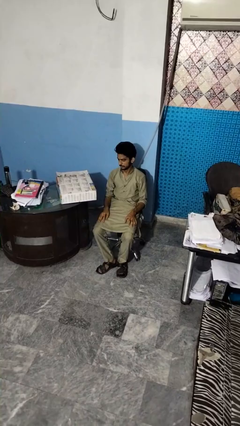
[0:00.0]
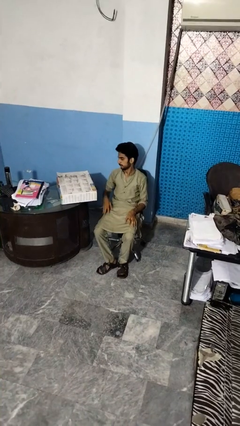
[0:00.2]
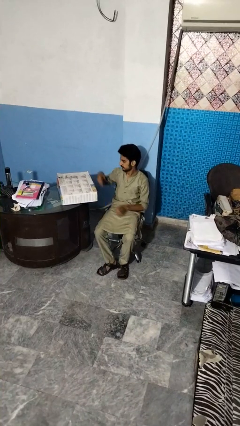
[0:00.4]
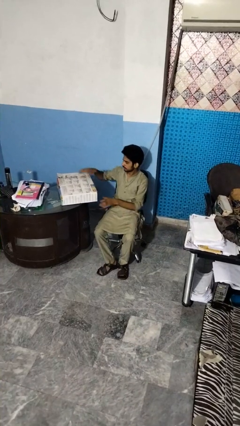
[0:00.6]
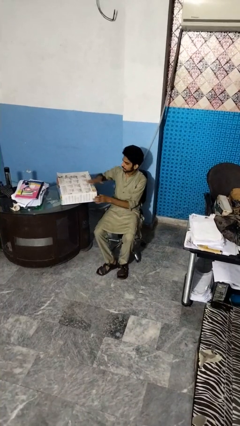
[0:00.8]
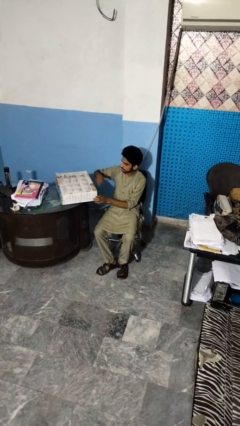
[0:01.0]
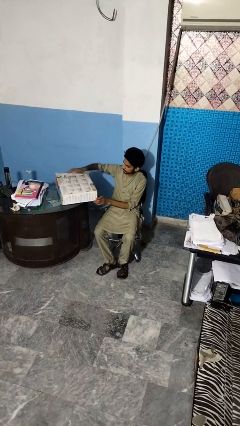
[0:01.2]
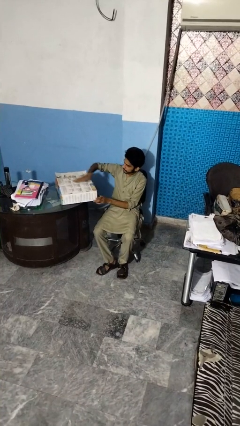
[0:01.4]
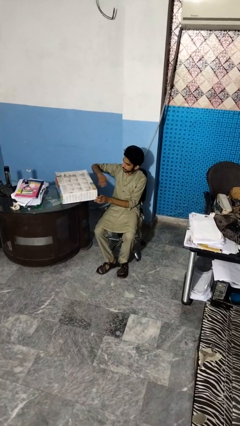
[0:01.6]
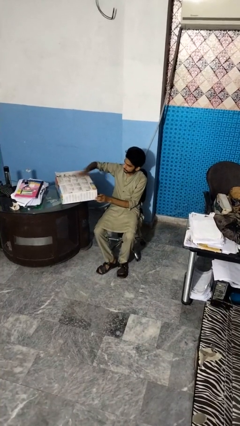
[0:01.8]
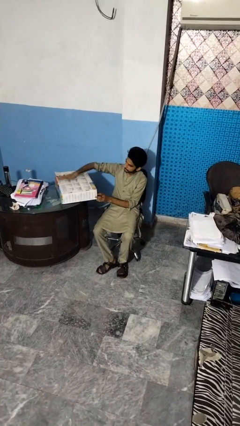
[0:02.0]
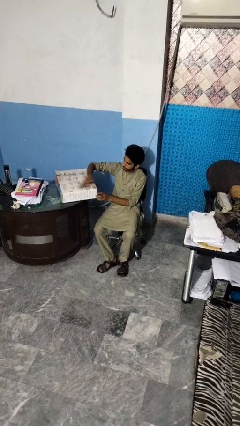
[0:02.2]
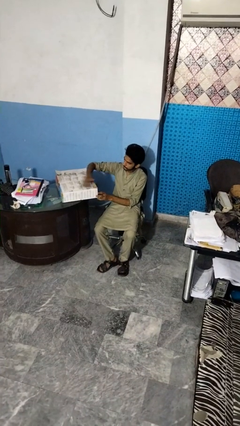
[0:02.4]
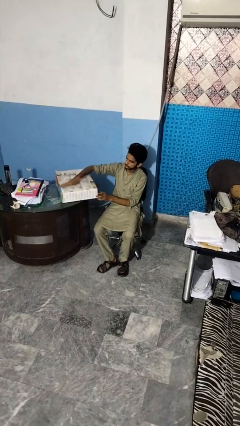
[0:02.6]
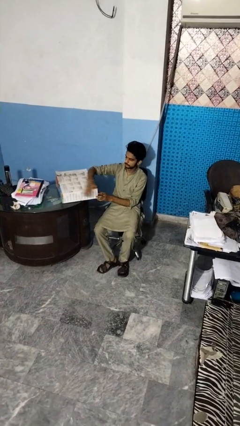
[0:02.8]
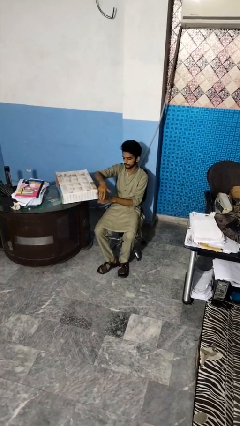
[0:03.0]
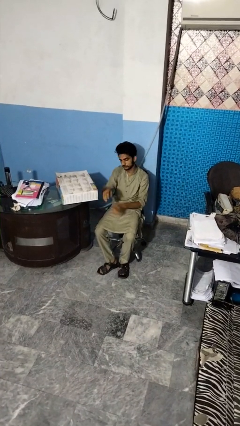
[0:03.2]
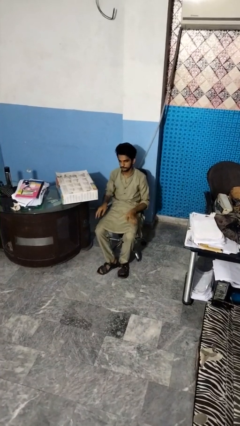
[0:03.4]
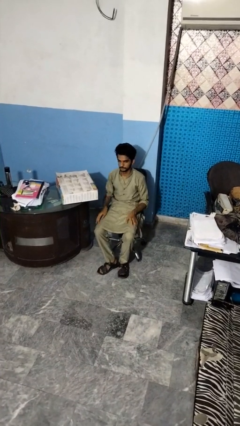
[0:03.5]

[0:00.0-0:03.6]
person waves hand over object

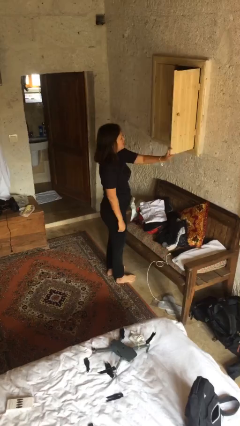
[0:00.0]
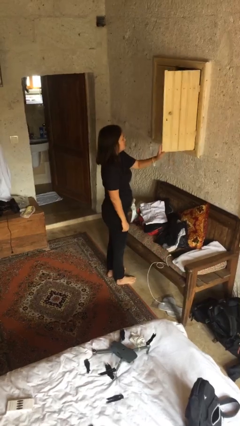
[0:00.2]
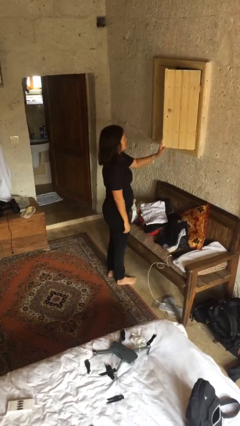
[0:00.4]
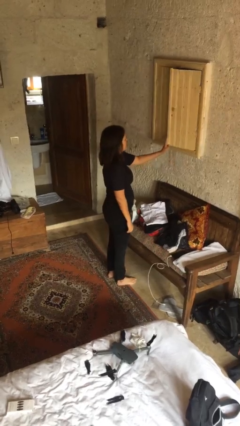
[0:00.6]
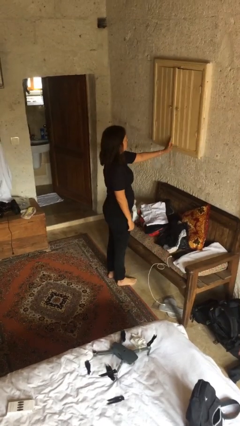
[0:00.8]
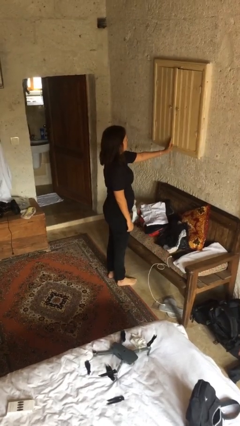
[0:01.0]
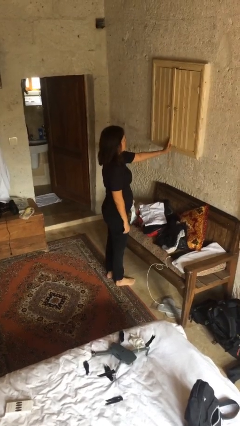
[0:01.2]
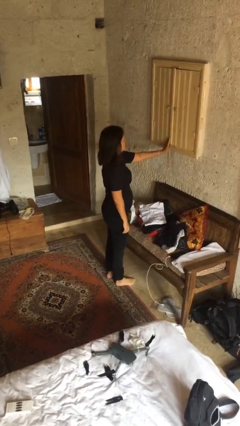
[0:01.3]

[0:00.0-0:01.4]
person closes dresser drawer

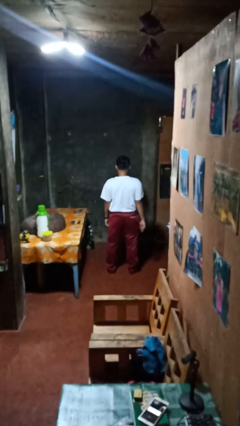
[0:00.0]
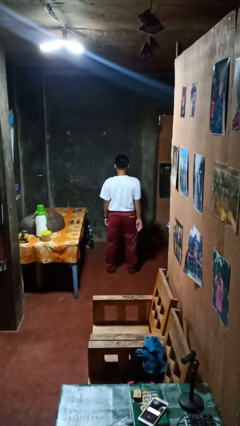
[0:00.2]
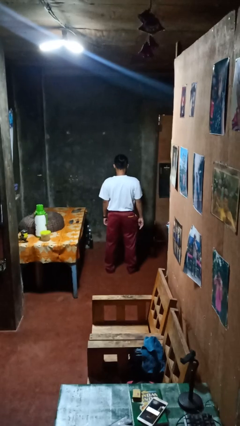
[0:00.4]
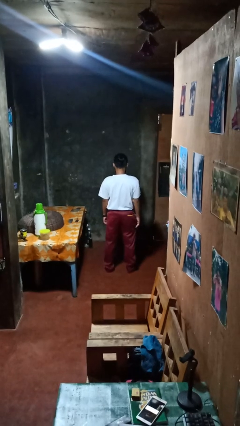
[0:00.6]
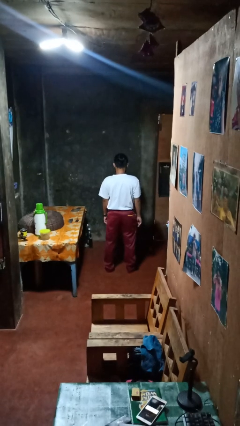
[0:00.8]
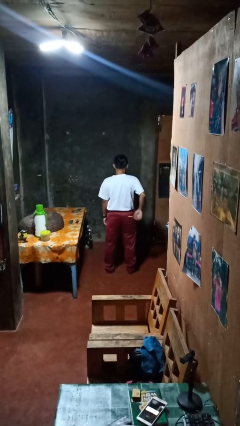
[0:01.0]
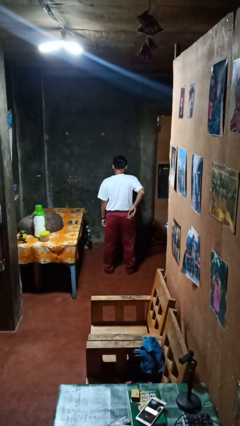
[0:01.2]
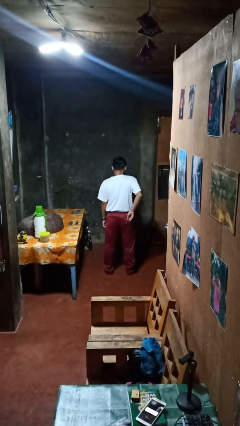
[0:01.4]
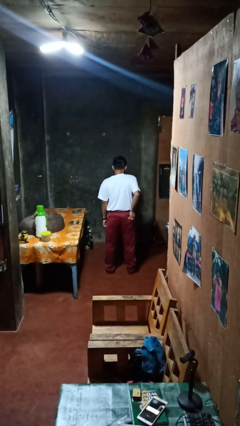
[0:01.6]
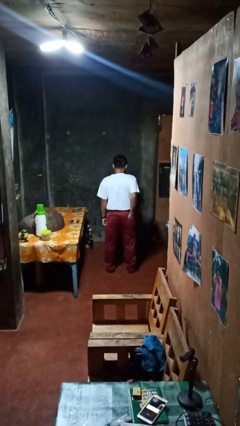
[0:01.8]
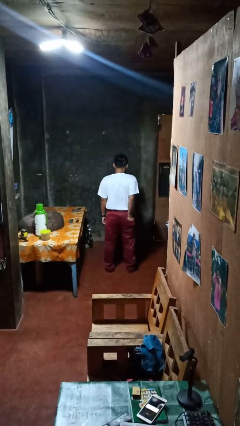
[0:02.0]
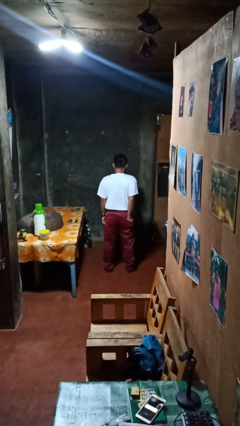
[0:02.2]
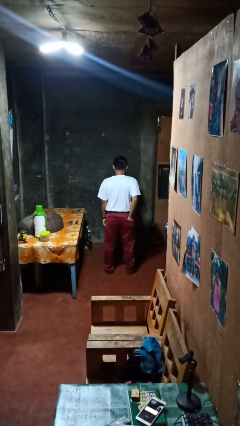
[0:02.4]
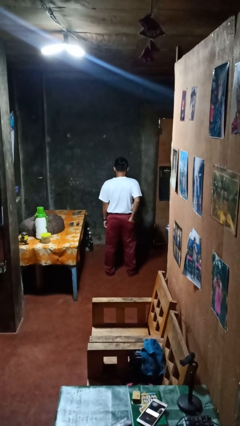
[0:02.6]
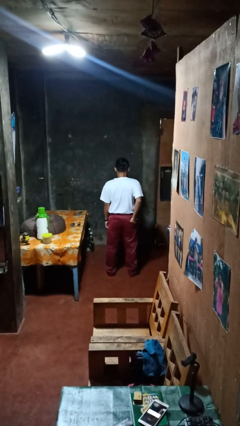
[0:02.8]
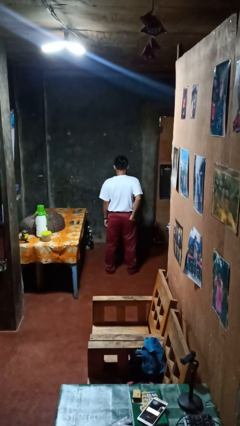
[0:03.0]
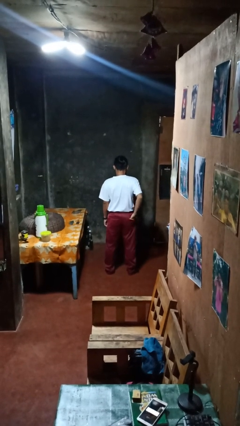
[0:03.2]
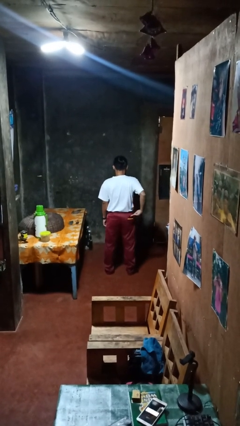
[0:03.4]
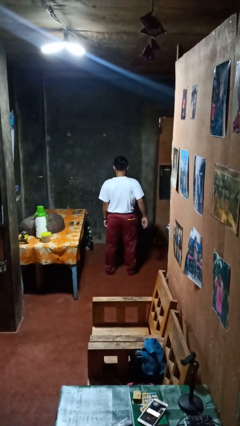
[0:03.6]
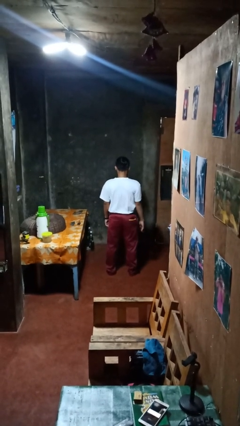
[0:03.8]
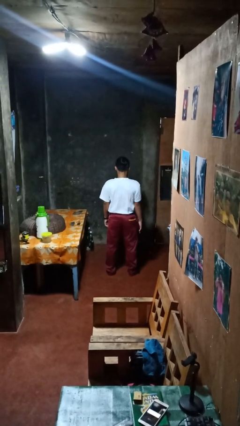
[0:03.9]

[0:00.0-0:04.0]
person puts hands in back pockets

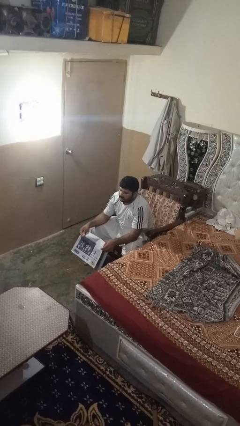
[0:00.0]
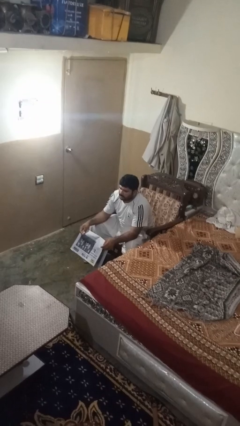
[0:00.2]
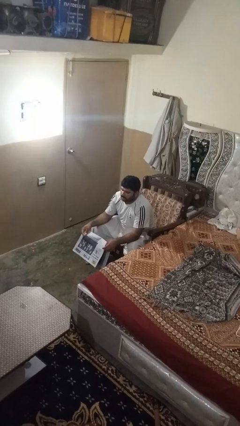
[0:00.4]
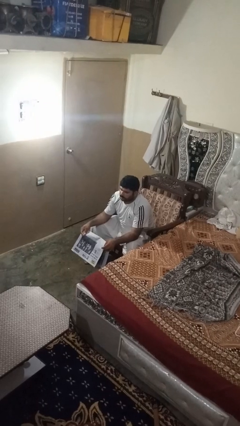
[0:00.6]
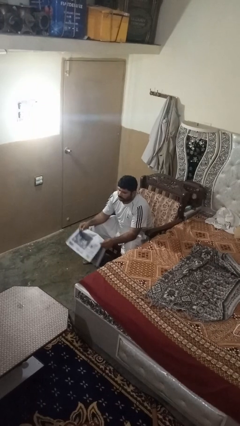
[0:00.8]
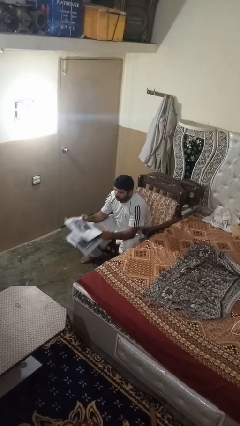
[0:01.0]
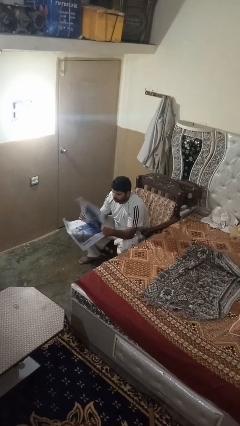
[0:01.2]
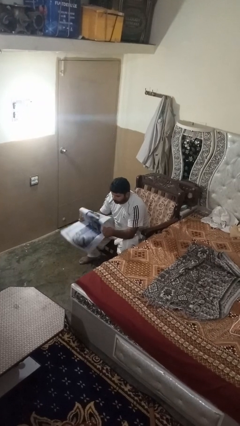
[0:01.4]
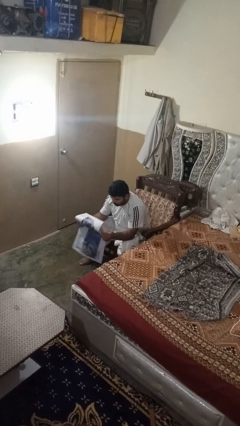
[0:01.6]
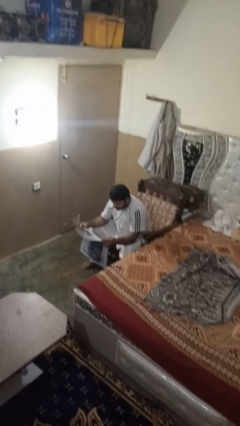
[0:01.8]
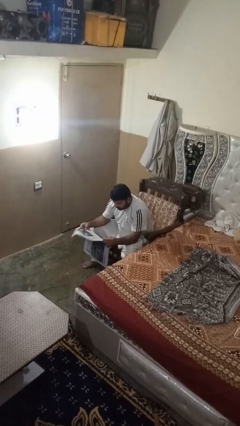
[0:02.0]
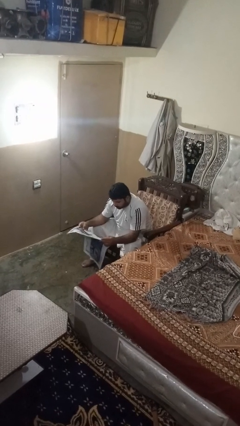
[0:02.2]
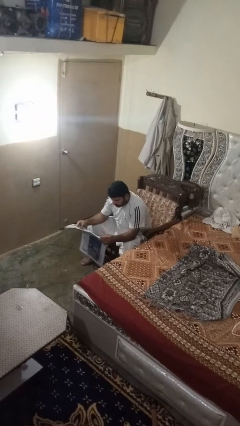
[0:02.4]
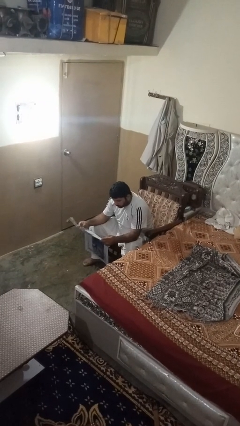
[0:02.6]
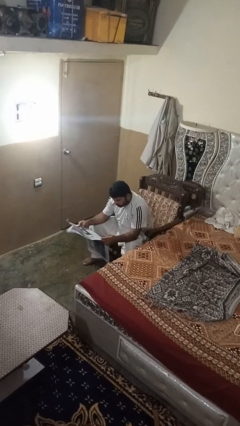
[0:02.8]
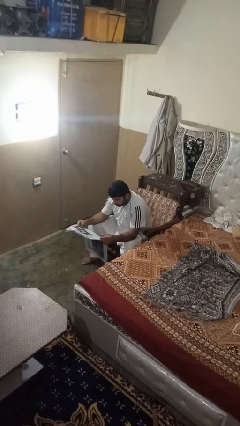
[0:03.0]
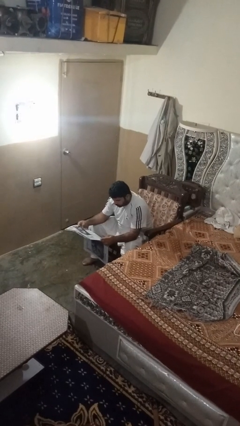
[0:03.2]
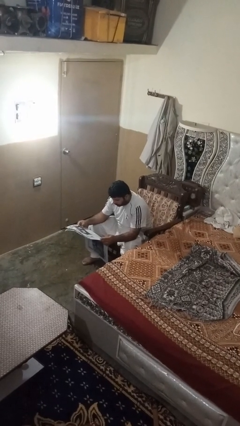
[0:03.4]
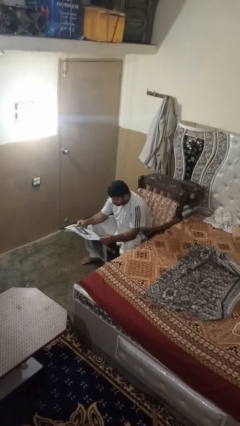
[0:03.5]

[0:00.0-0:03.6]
person reads newspaper

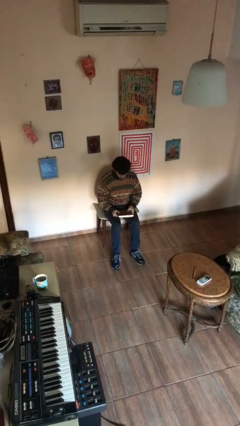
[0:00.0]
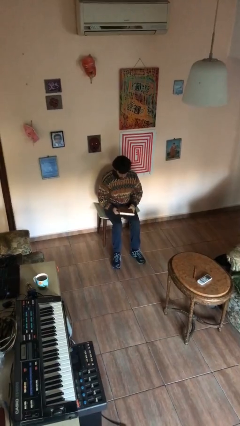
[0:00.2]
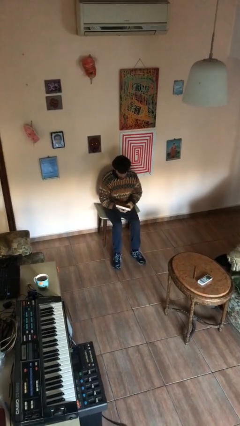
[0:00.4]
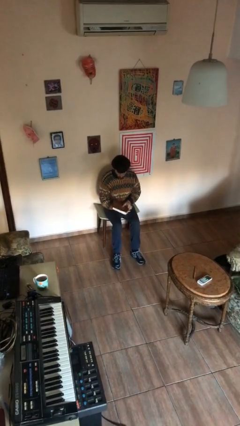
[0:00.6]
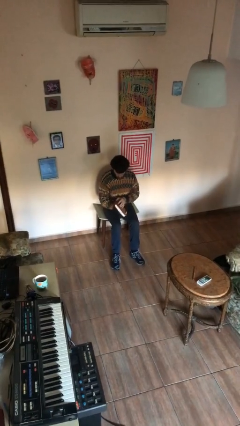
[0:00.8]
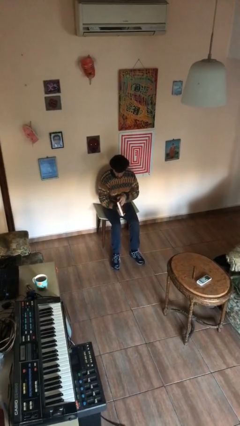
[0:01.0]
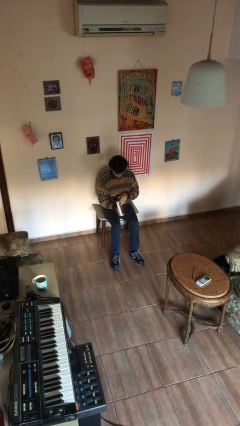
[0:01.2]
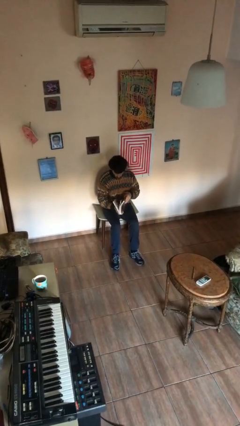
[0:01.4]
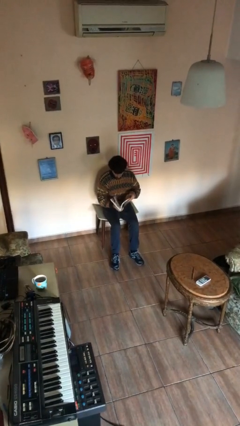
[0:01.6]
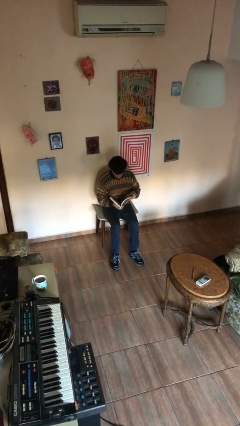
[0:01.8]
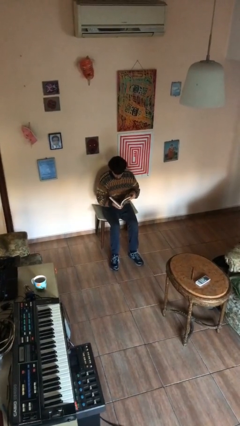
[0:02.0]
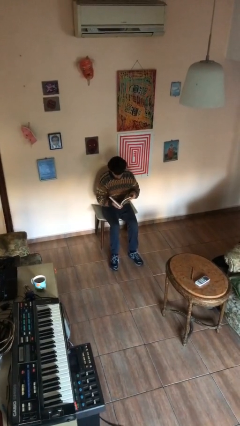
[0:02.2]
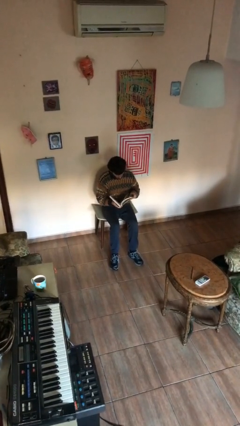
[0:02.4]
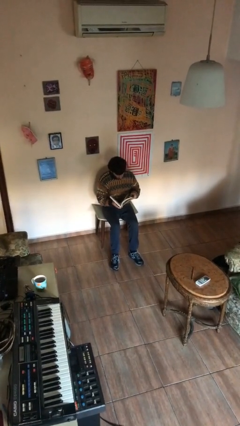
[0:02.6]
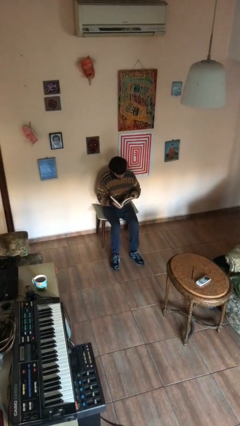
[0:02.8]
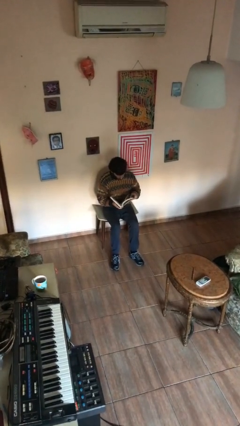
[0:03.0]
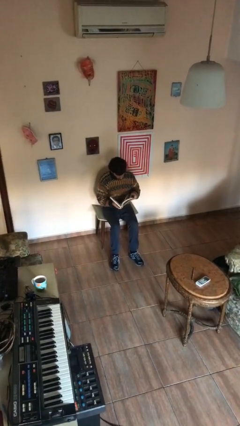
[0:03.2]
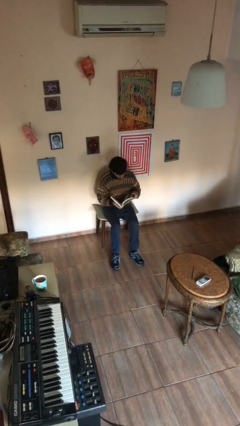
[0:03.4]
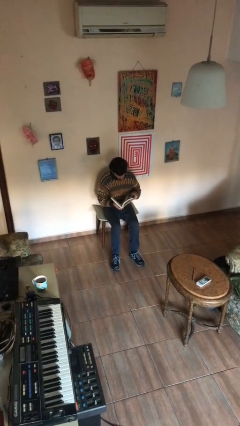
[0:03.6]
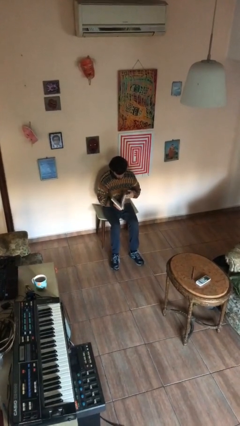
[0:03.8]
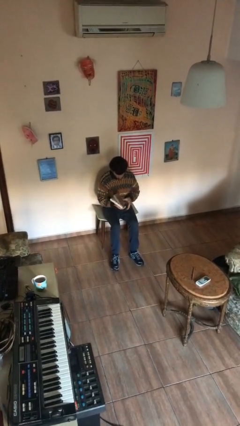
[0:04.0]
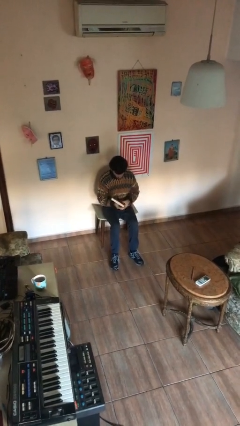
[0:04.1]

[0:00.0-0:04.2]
person reads book

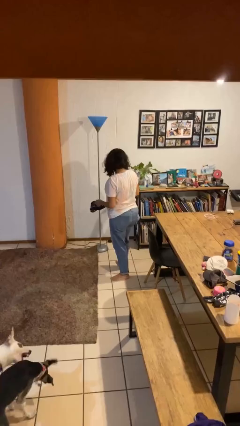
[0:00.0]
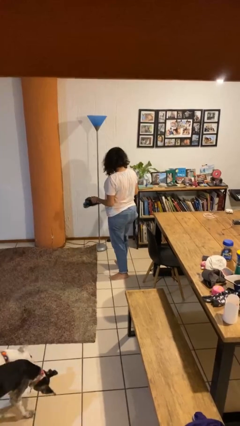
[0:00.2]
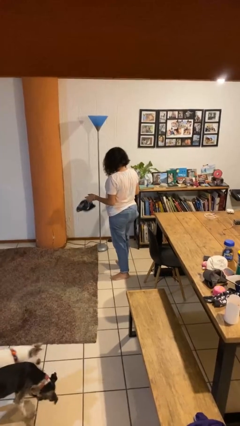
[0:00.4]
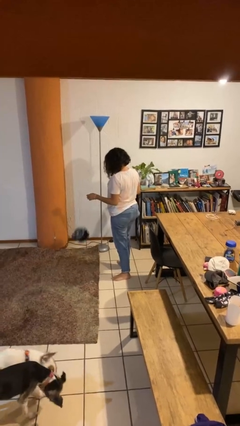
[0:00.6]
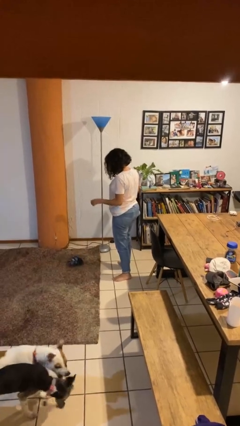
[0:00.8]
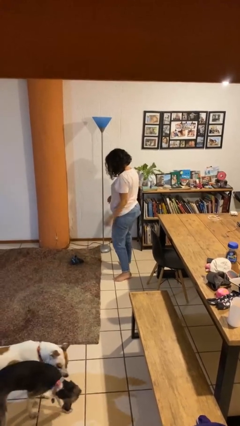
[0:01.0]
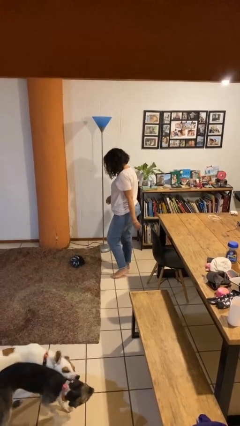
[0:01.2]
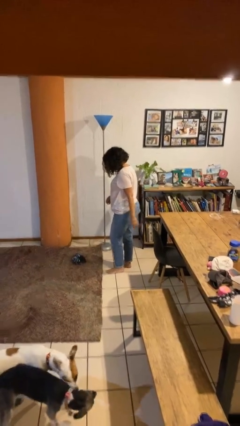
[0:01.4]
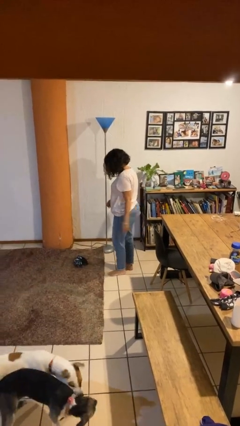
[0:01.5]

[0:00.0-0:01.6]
person throws object to ground
